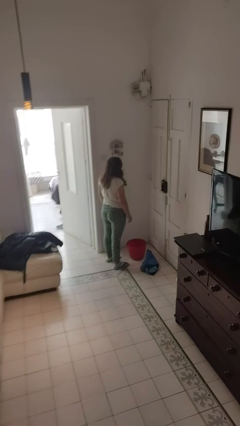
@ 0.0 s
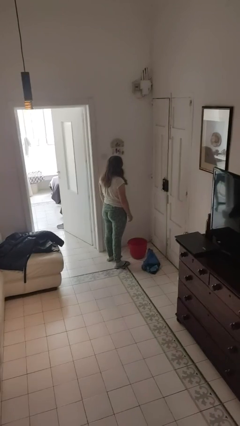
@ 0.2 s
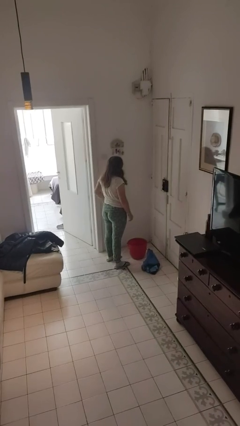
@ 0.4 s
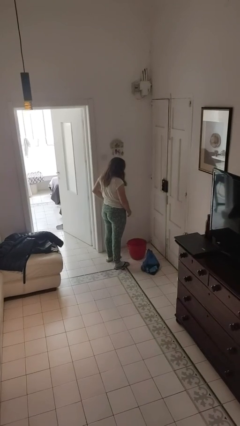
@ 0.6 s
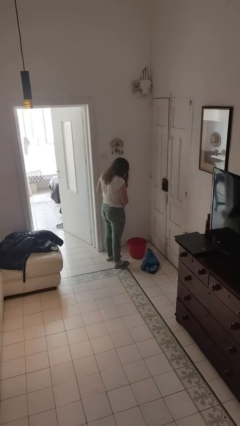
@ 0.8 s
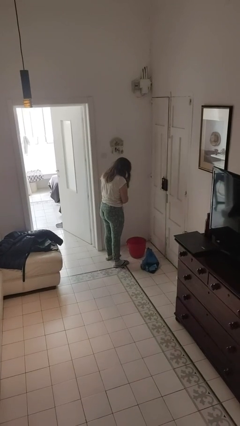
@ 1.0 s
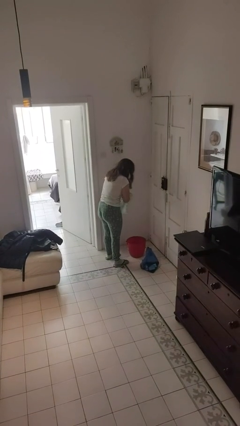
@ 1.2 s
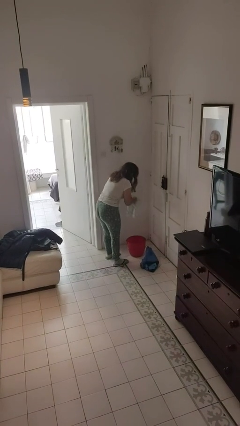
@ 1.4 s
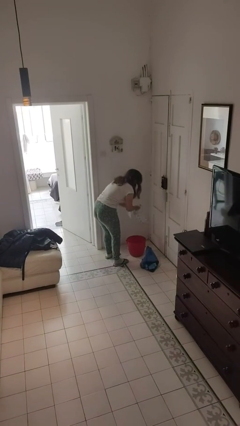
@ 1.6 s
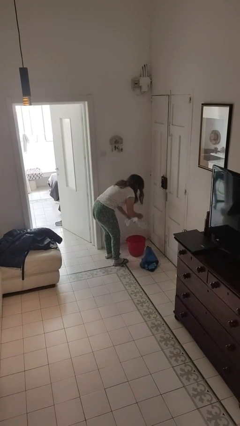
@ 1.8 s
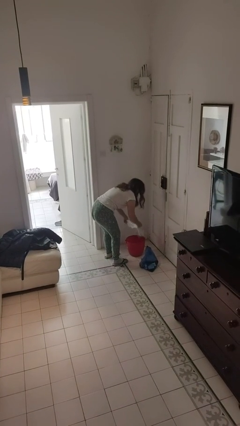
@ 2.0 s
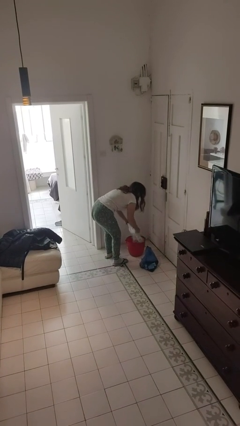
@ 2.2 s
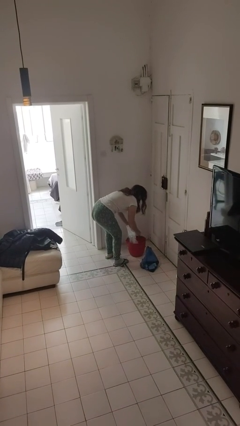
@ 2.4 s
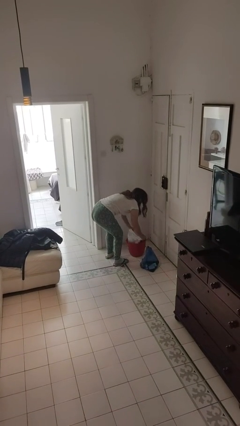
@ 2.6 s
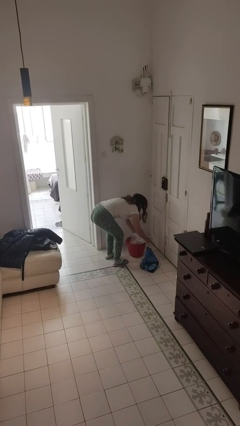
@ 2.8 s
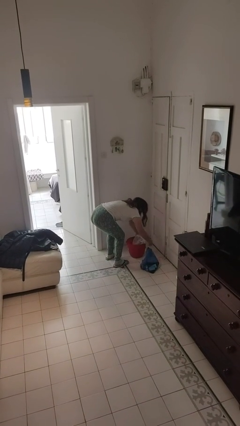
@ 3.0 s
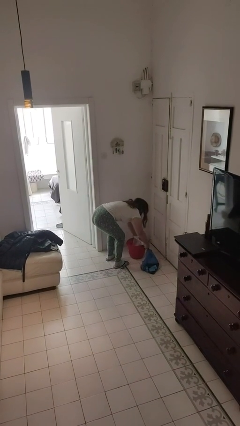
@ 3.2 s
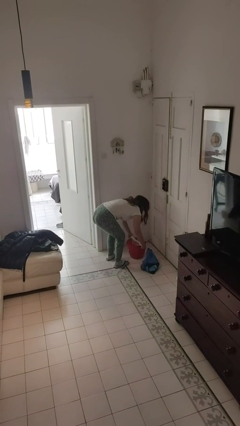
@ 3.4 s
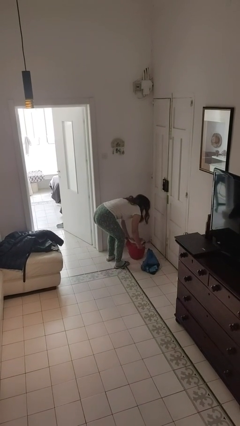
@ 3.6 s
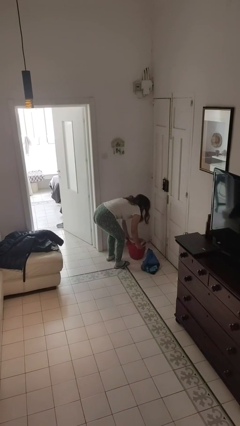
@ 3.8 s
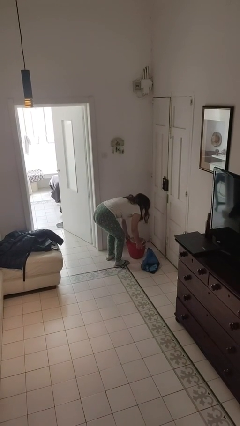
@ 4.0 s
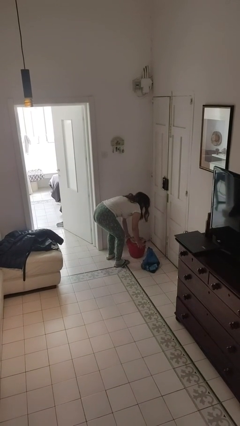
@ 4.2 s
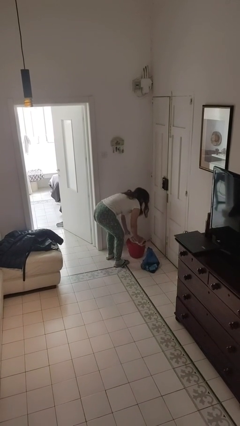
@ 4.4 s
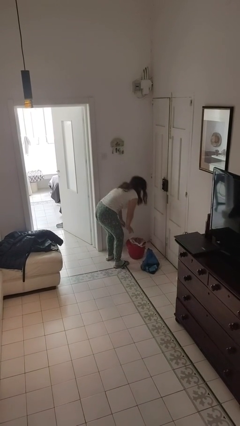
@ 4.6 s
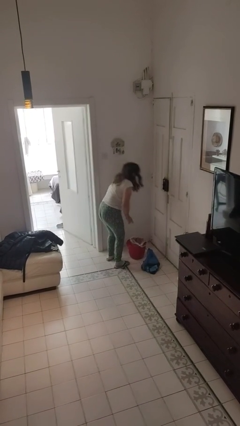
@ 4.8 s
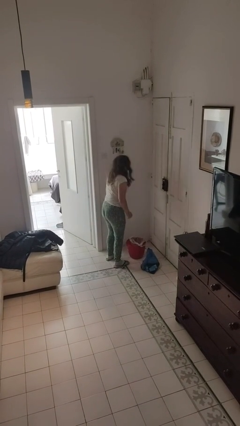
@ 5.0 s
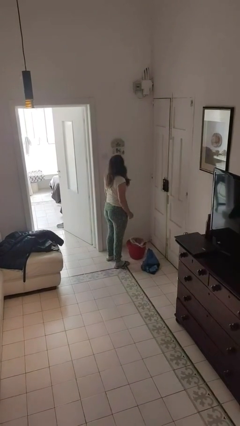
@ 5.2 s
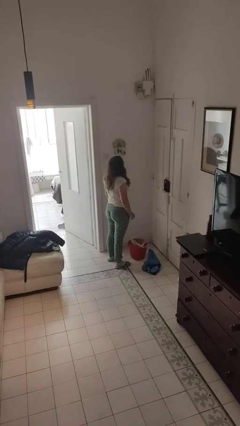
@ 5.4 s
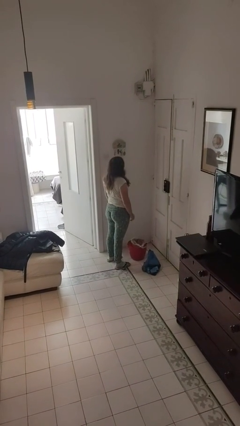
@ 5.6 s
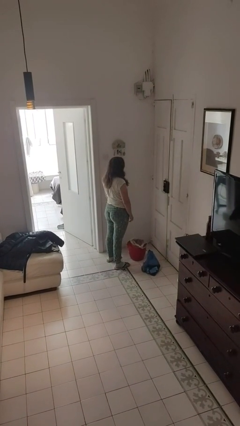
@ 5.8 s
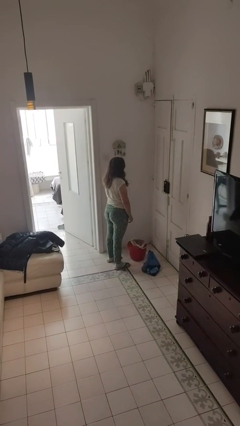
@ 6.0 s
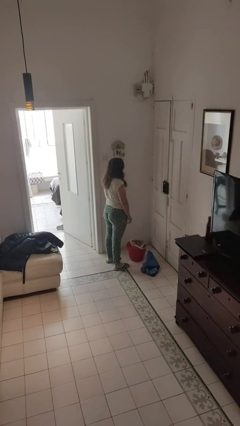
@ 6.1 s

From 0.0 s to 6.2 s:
person inserts trashbag into trashcan

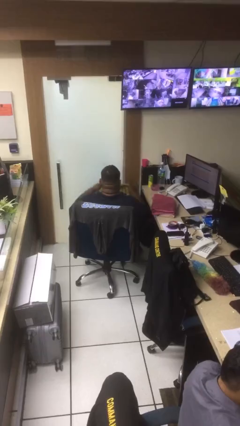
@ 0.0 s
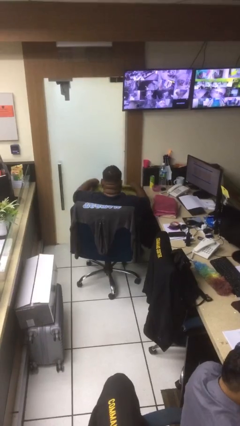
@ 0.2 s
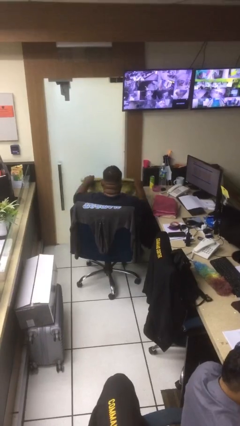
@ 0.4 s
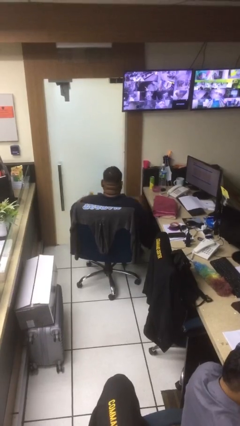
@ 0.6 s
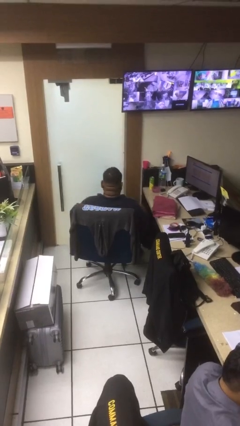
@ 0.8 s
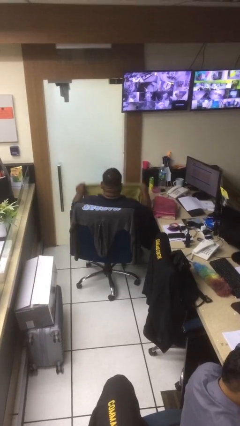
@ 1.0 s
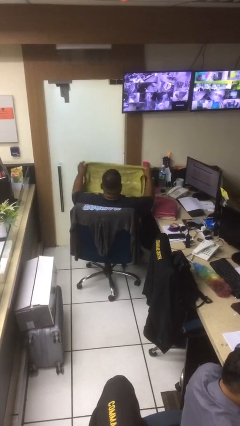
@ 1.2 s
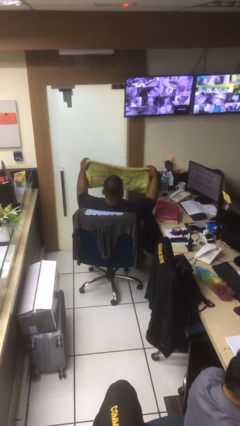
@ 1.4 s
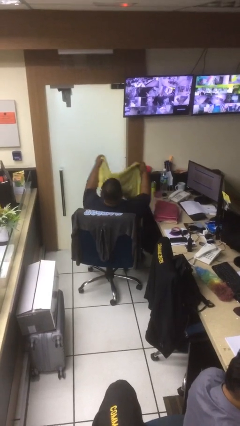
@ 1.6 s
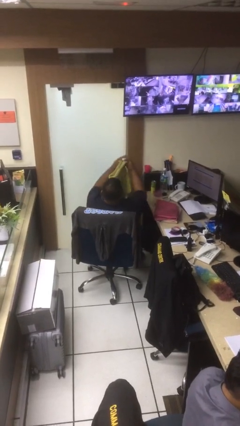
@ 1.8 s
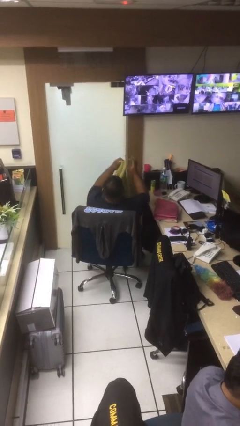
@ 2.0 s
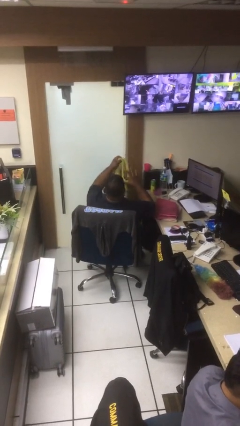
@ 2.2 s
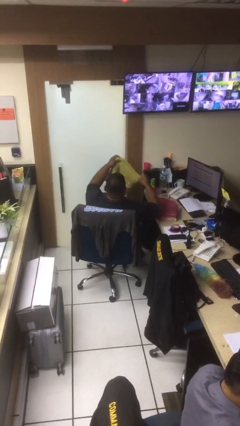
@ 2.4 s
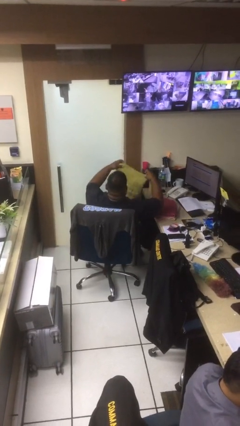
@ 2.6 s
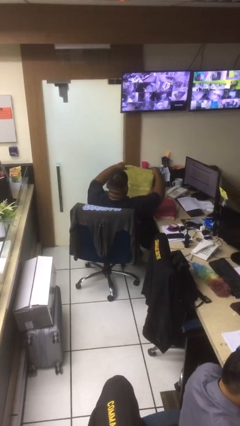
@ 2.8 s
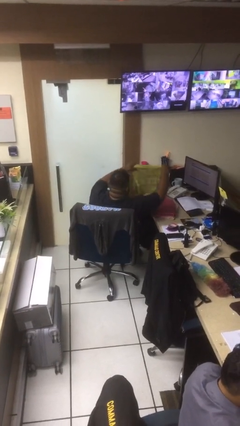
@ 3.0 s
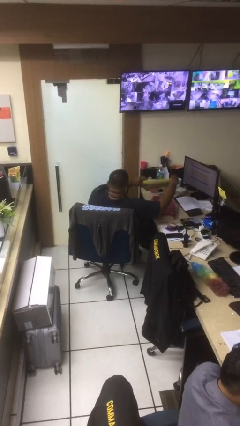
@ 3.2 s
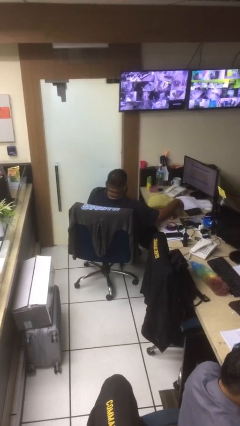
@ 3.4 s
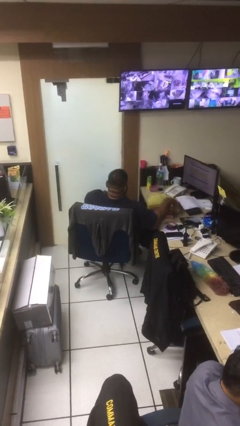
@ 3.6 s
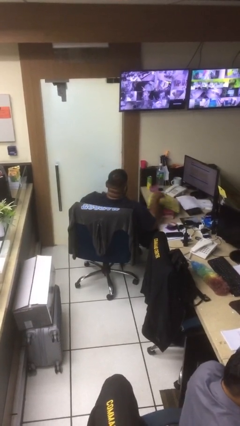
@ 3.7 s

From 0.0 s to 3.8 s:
person folds towel

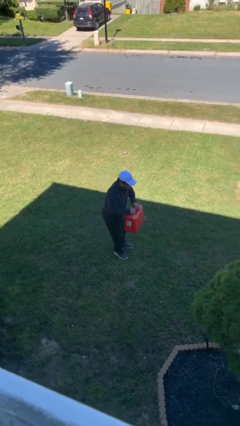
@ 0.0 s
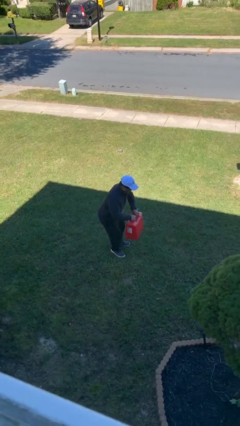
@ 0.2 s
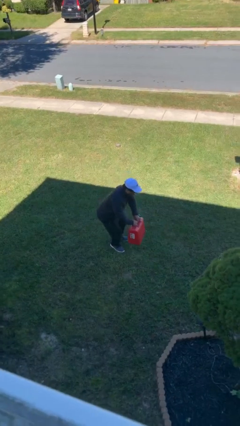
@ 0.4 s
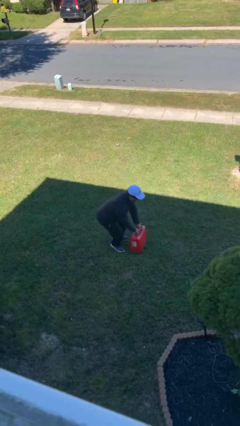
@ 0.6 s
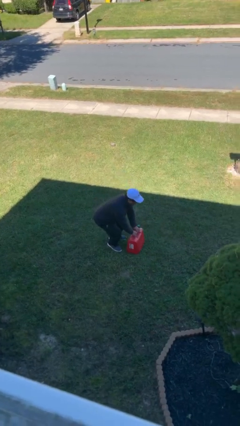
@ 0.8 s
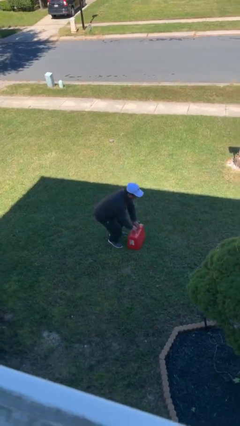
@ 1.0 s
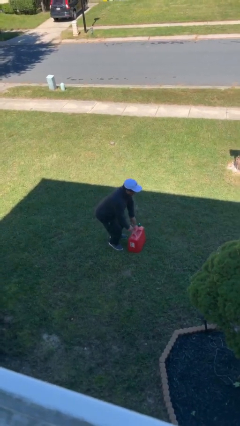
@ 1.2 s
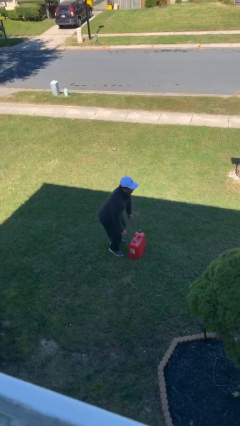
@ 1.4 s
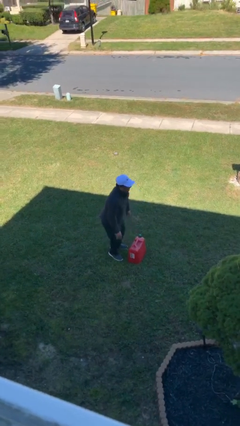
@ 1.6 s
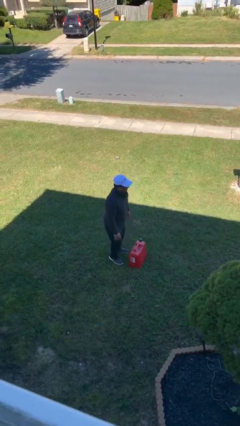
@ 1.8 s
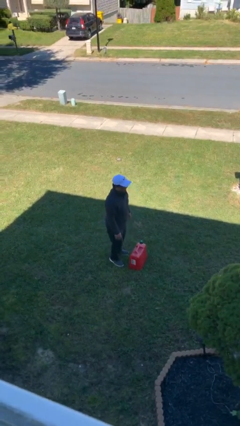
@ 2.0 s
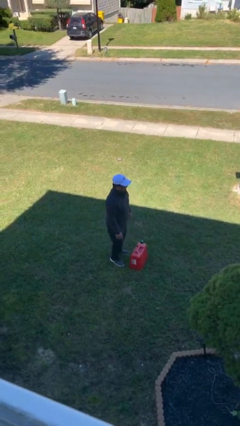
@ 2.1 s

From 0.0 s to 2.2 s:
person puts down object on floor

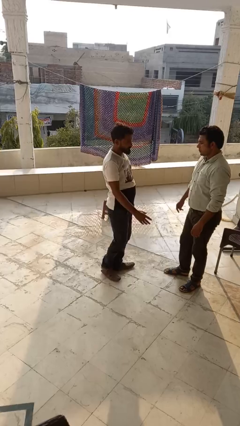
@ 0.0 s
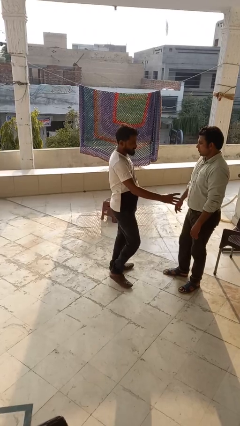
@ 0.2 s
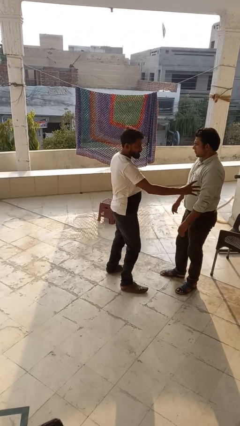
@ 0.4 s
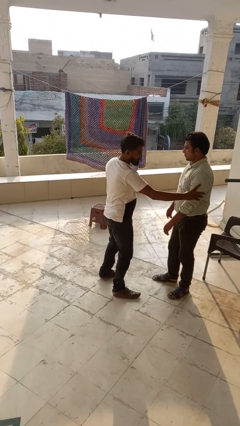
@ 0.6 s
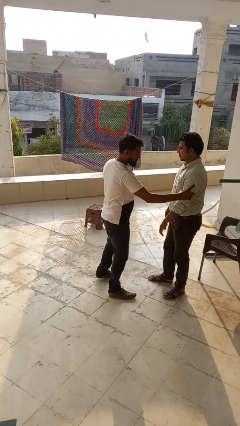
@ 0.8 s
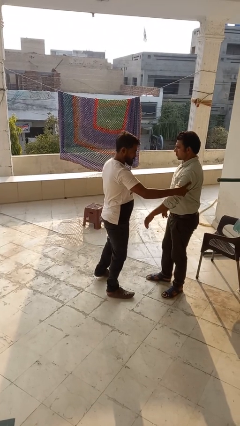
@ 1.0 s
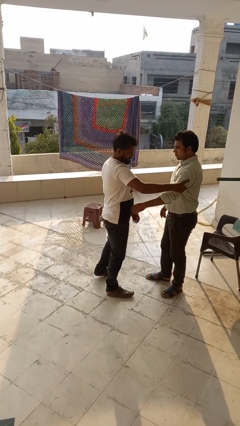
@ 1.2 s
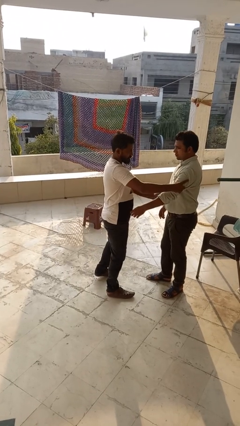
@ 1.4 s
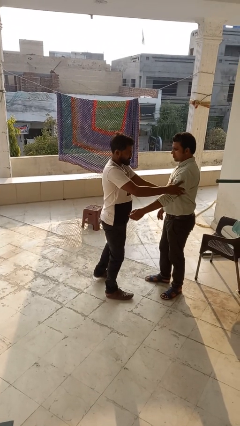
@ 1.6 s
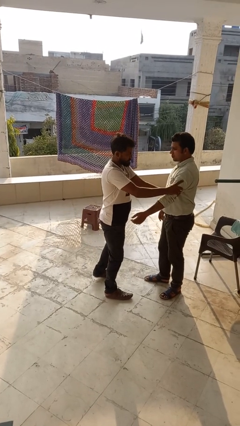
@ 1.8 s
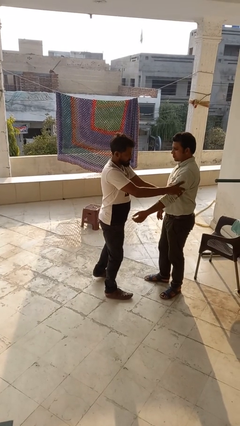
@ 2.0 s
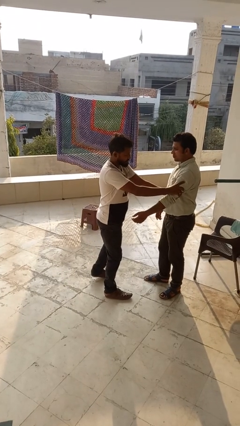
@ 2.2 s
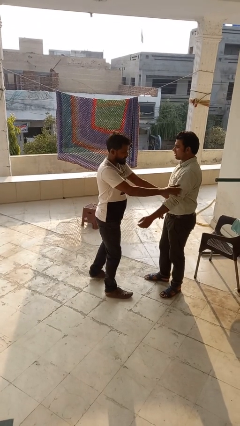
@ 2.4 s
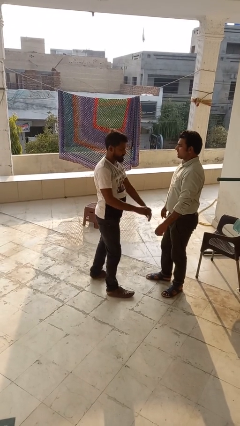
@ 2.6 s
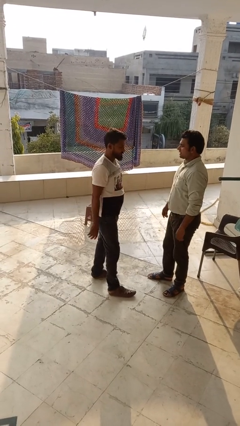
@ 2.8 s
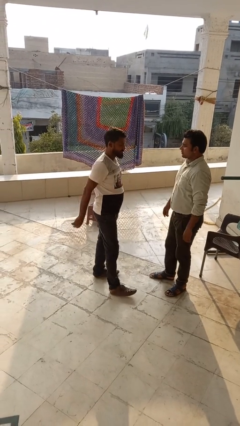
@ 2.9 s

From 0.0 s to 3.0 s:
person grabs person by bicep

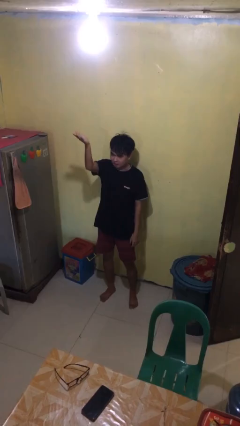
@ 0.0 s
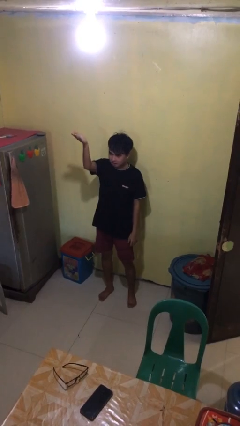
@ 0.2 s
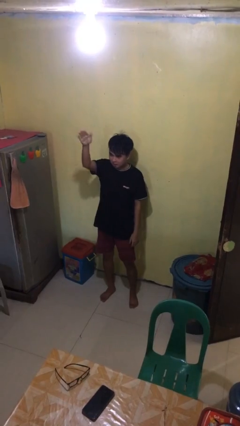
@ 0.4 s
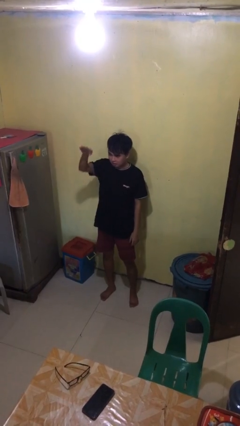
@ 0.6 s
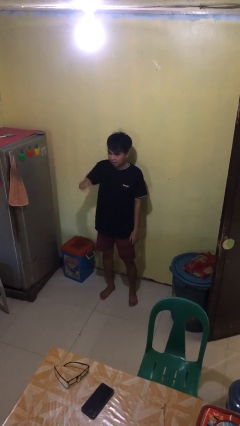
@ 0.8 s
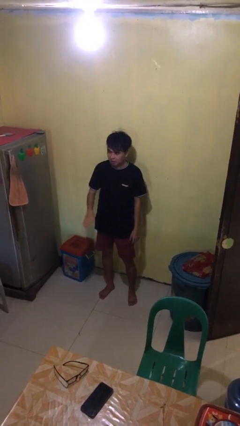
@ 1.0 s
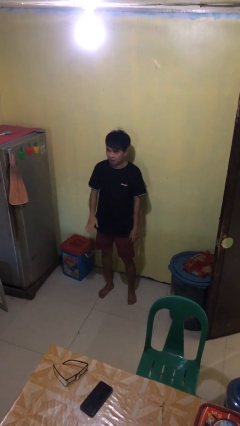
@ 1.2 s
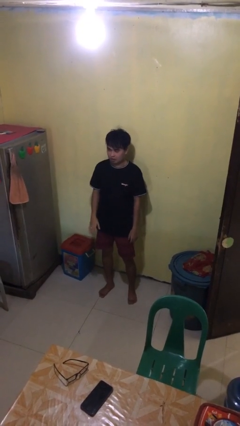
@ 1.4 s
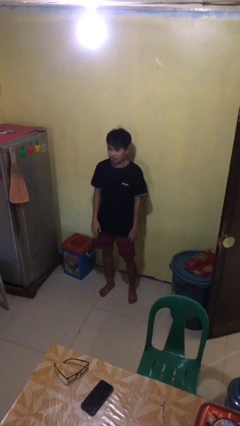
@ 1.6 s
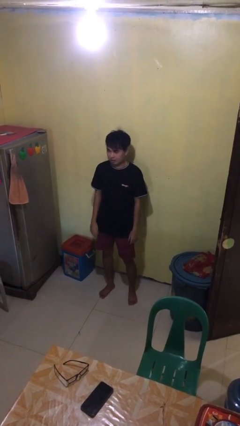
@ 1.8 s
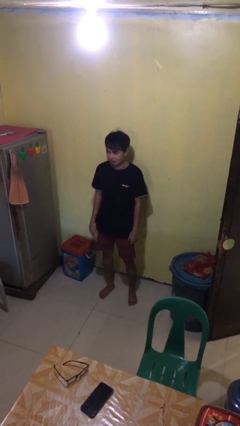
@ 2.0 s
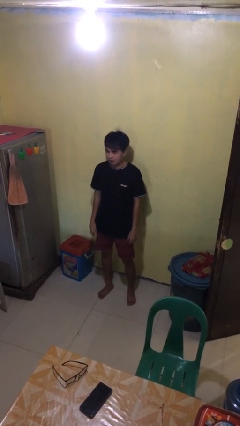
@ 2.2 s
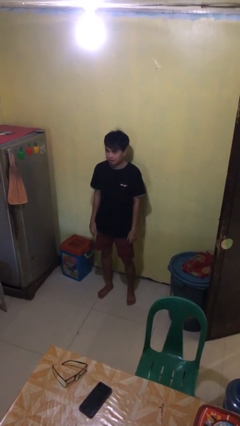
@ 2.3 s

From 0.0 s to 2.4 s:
person gestures swipe down
